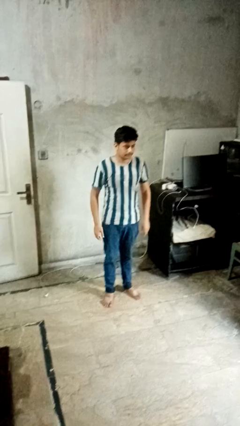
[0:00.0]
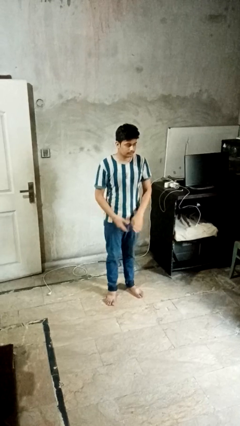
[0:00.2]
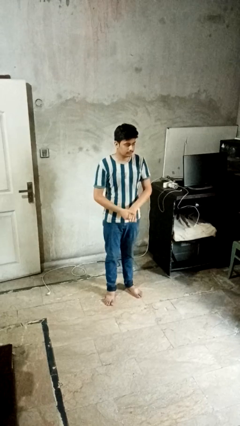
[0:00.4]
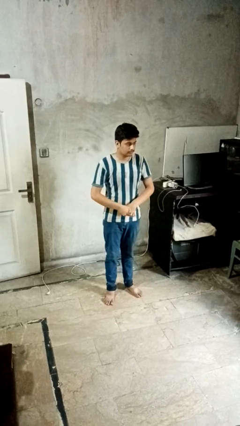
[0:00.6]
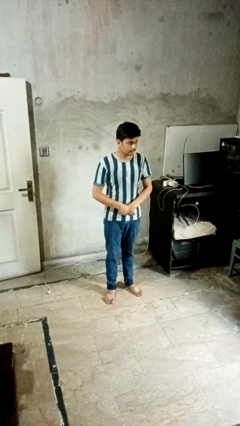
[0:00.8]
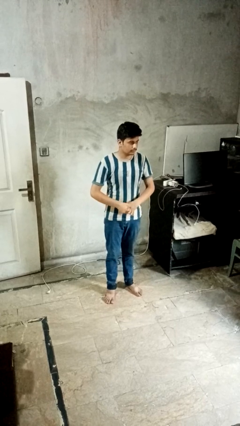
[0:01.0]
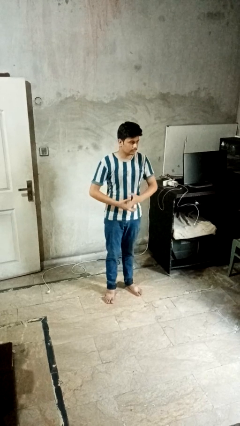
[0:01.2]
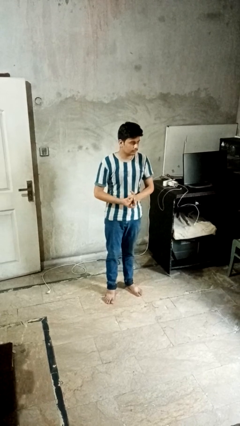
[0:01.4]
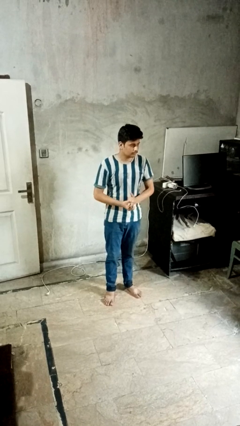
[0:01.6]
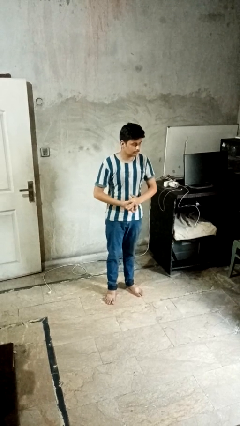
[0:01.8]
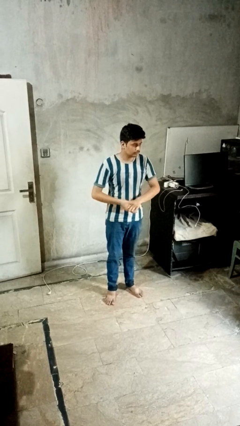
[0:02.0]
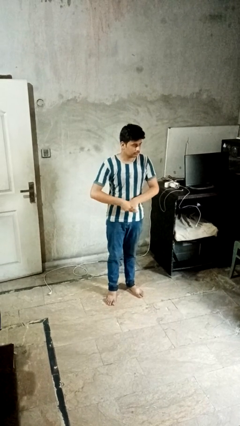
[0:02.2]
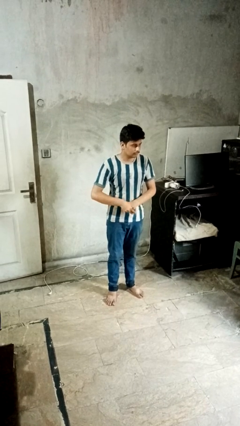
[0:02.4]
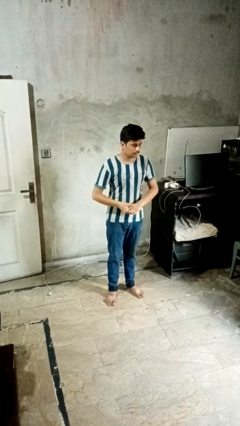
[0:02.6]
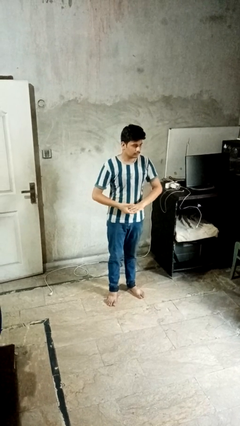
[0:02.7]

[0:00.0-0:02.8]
person cracks knuckles

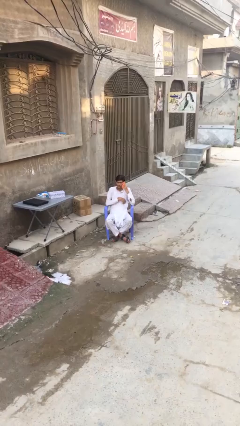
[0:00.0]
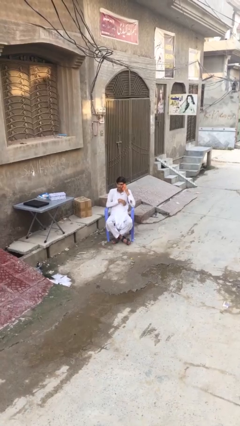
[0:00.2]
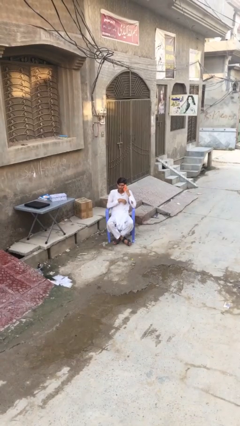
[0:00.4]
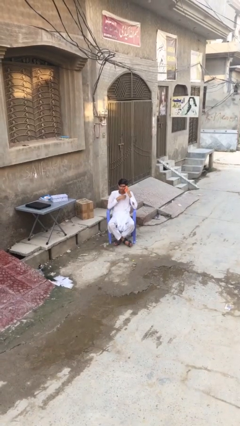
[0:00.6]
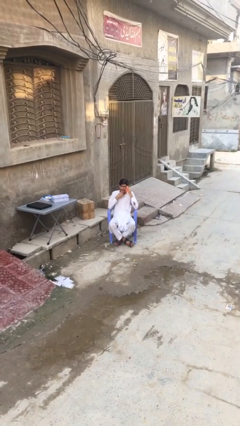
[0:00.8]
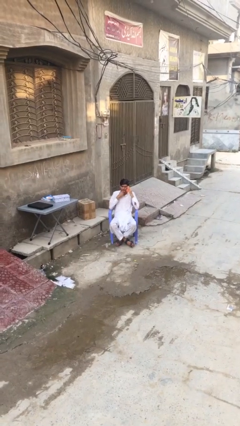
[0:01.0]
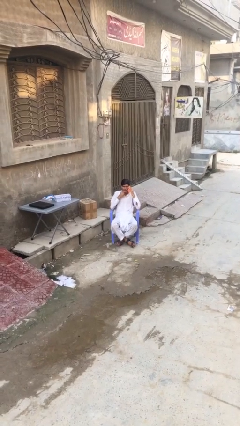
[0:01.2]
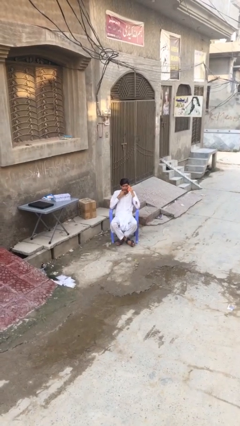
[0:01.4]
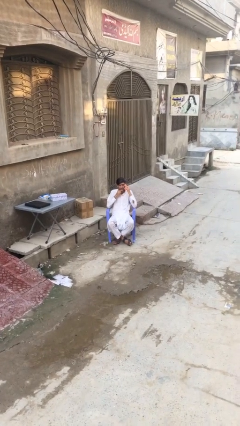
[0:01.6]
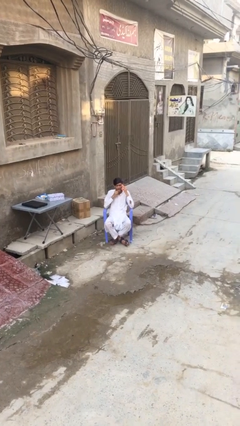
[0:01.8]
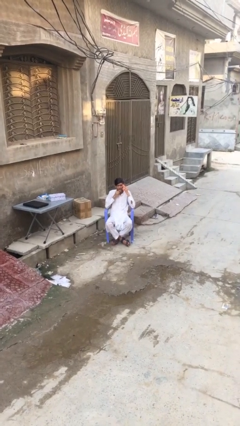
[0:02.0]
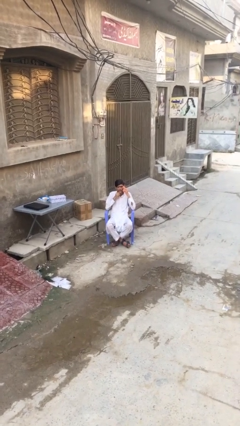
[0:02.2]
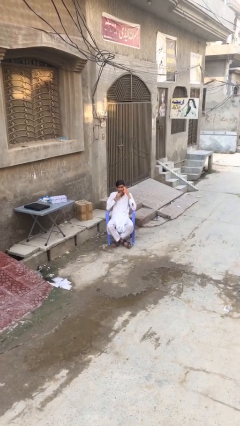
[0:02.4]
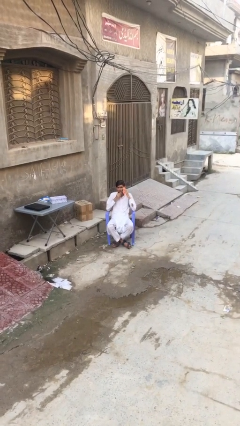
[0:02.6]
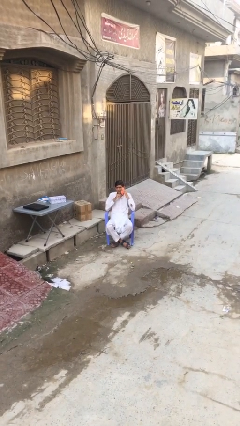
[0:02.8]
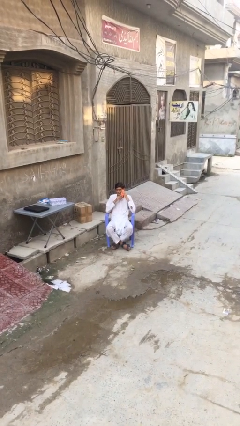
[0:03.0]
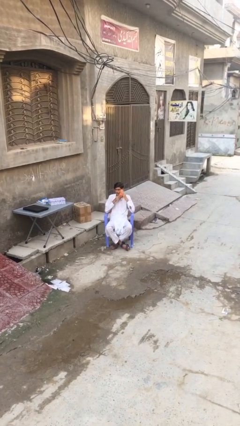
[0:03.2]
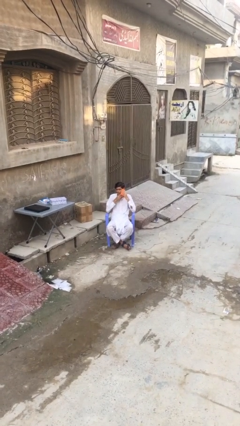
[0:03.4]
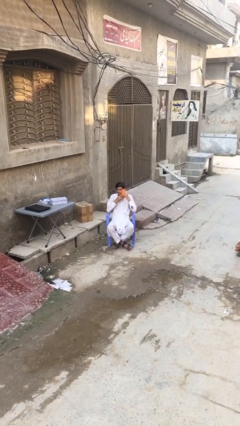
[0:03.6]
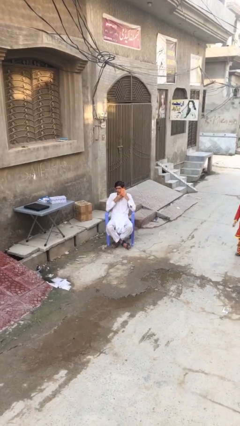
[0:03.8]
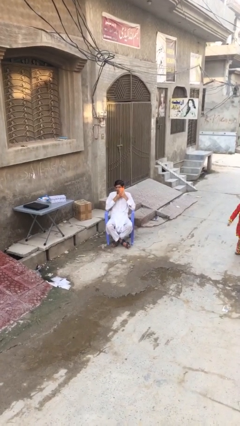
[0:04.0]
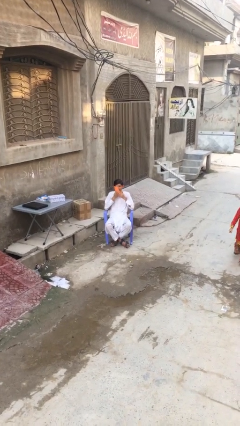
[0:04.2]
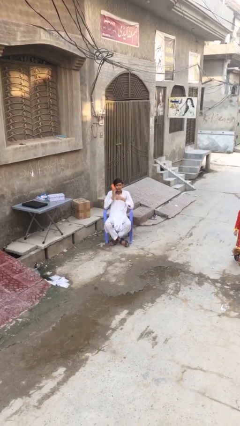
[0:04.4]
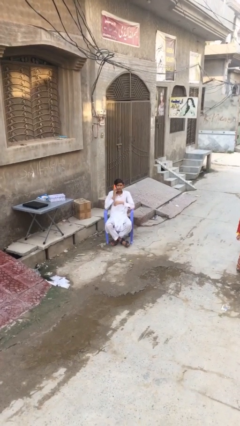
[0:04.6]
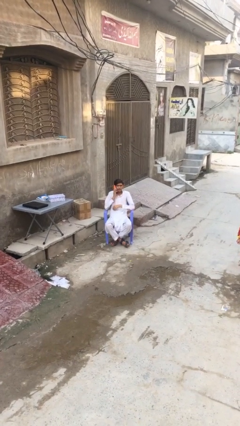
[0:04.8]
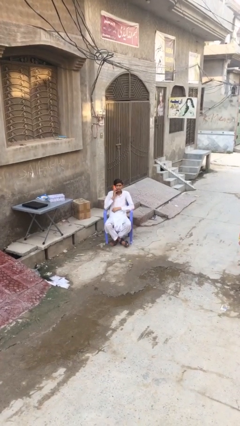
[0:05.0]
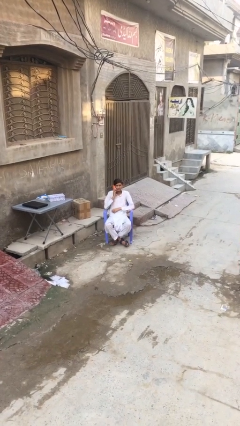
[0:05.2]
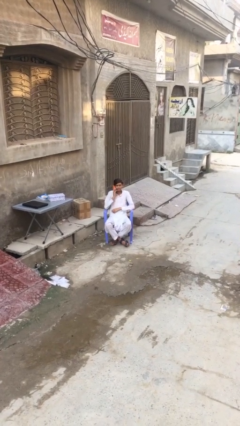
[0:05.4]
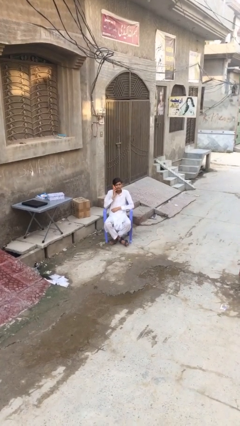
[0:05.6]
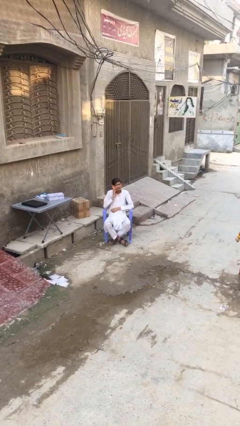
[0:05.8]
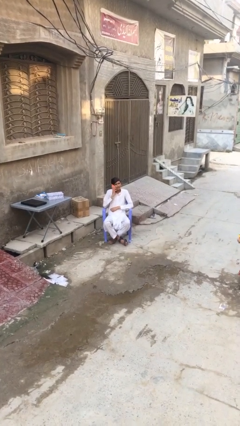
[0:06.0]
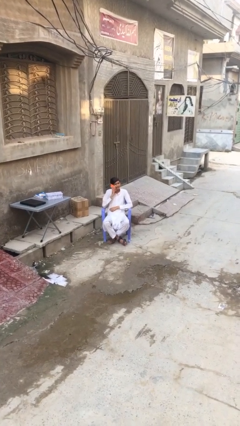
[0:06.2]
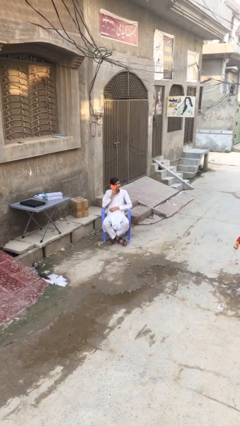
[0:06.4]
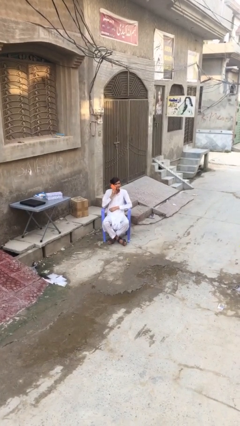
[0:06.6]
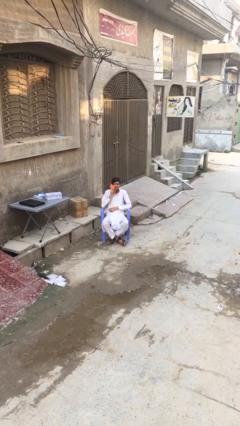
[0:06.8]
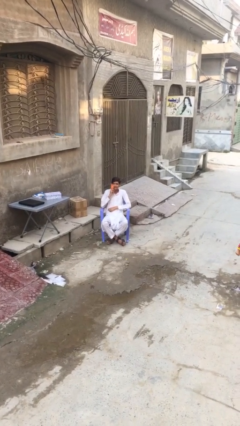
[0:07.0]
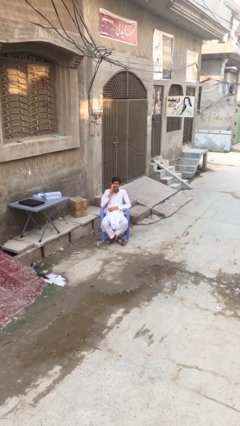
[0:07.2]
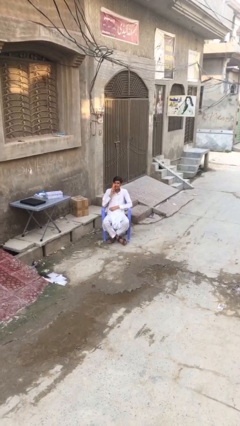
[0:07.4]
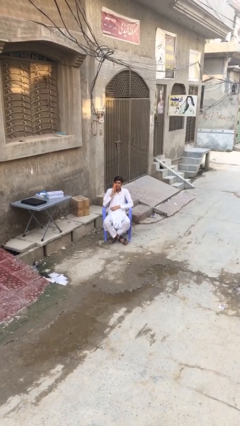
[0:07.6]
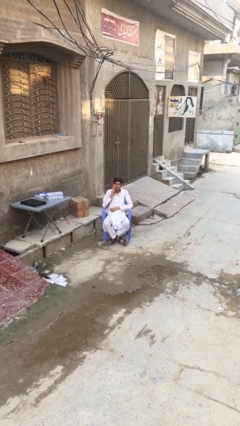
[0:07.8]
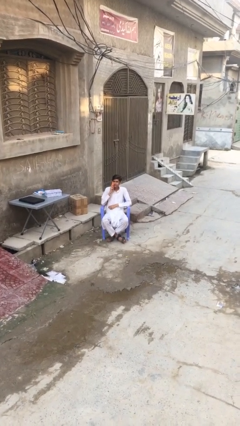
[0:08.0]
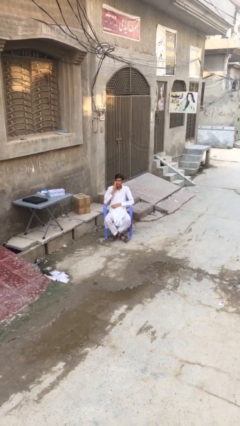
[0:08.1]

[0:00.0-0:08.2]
person talks on phone

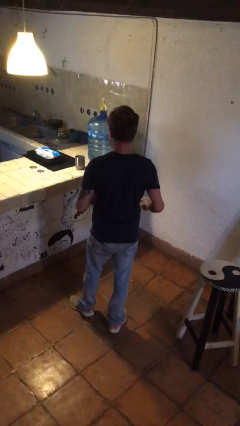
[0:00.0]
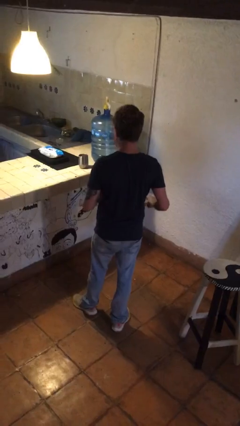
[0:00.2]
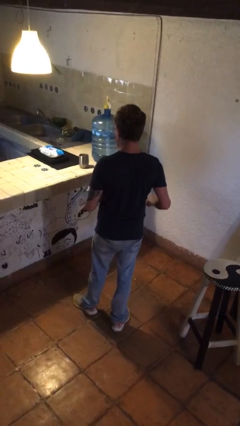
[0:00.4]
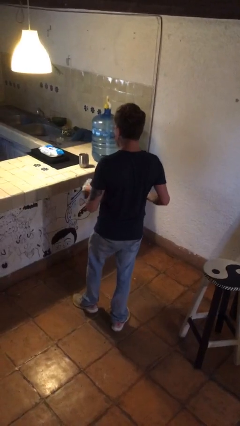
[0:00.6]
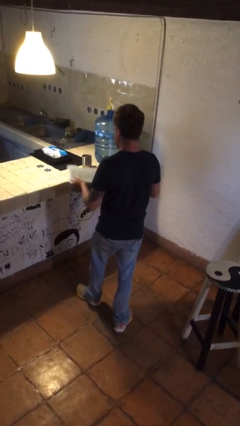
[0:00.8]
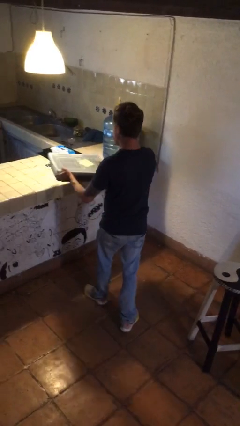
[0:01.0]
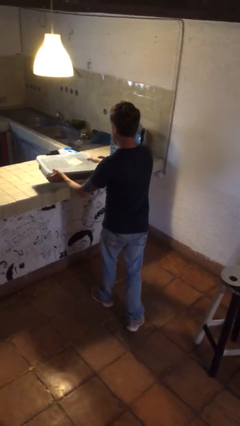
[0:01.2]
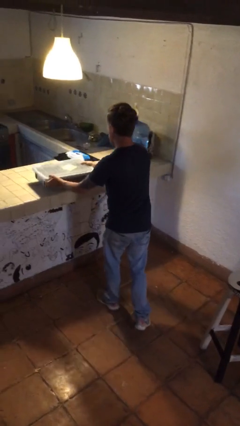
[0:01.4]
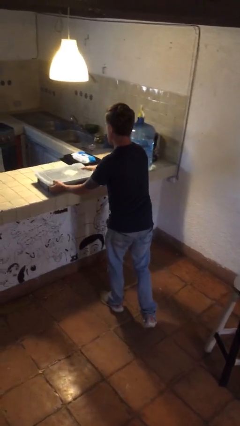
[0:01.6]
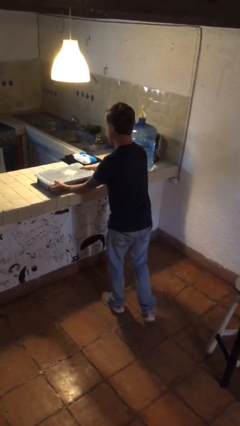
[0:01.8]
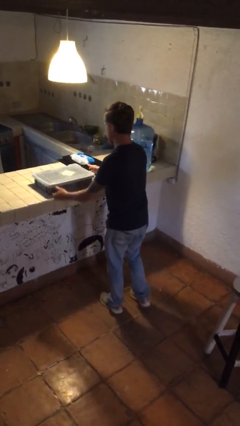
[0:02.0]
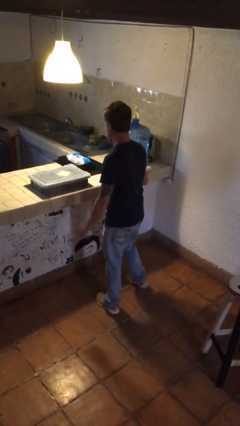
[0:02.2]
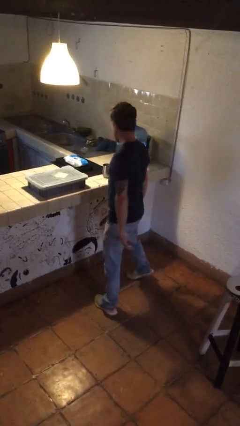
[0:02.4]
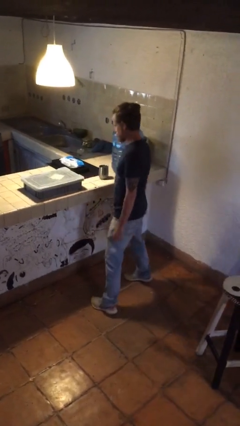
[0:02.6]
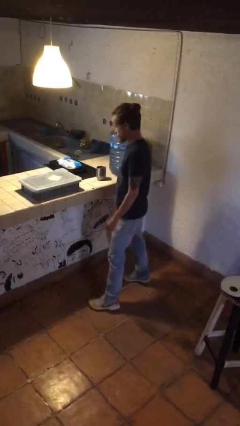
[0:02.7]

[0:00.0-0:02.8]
person puts down object on countertop

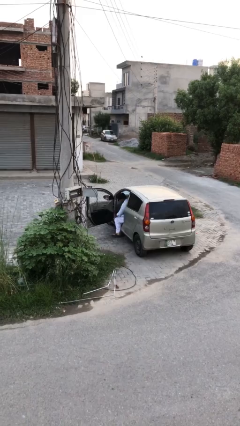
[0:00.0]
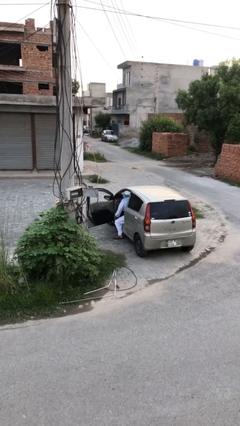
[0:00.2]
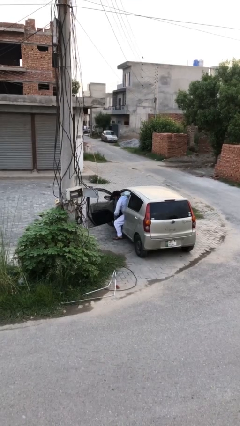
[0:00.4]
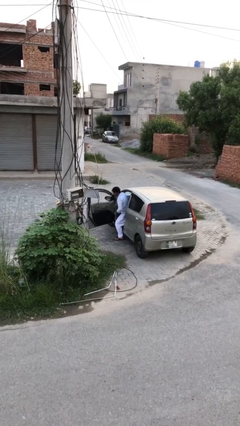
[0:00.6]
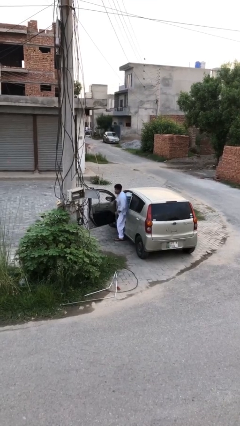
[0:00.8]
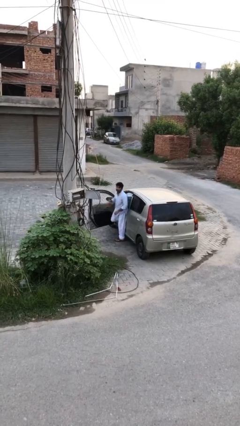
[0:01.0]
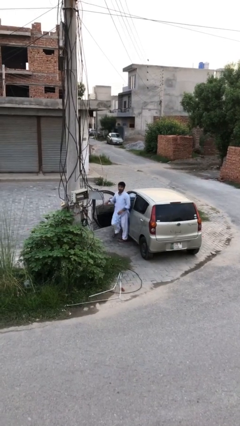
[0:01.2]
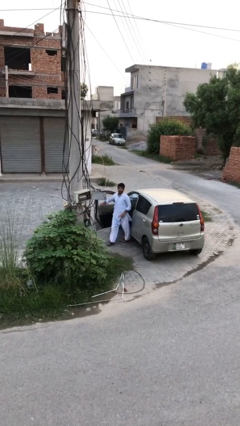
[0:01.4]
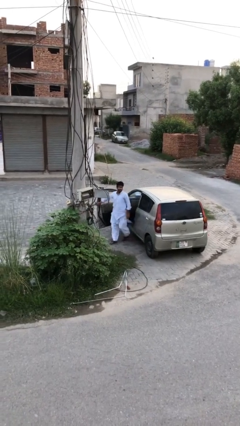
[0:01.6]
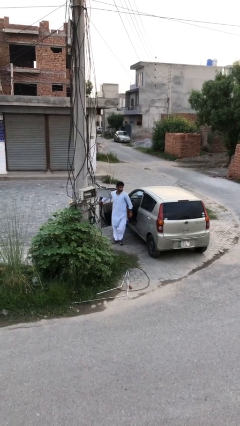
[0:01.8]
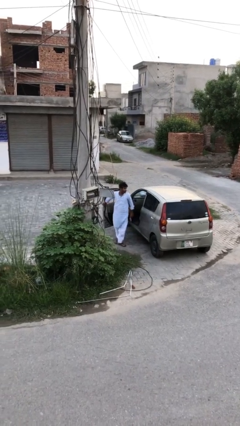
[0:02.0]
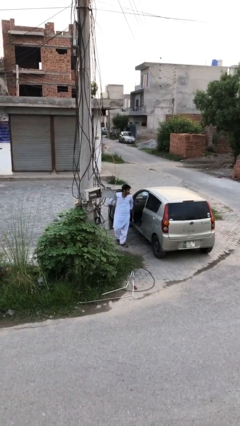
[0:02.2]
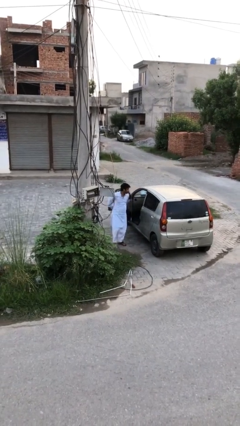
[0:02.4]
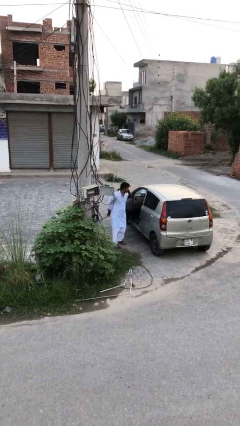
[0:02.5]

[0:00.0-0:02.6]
person exits car

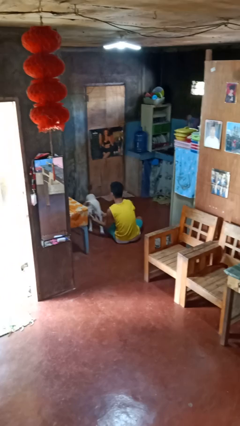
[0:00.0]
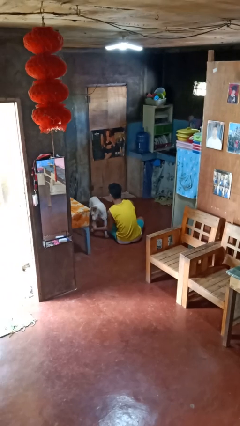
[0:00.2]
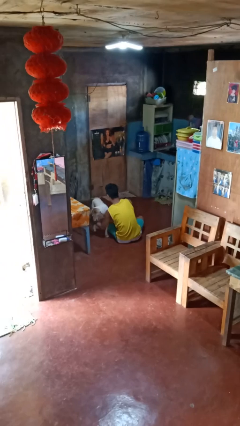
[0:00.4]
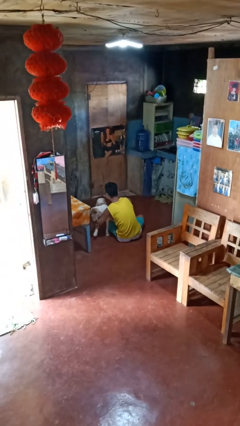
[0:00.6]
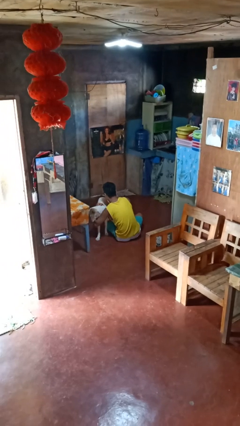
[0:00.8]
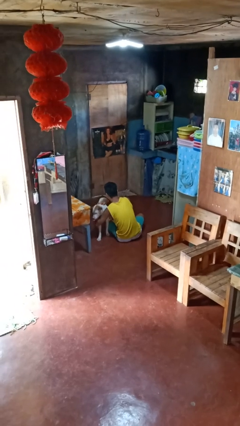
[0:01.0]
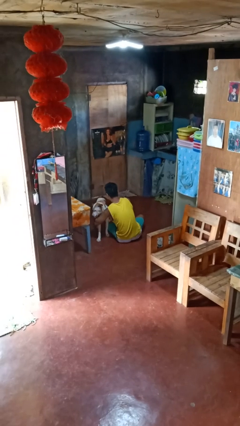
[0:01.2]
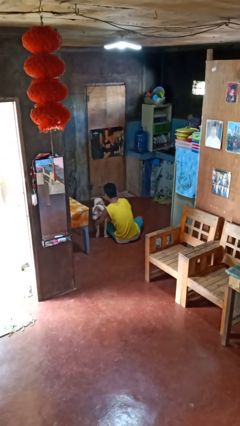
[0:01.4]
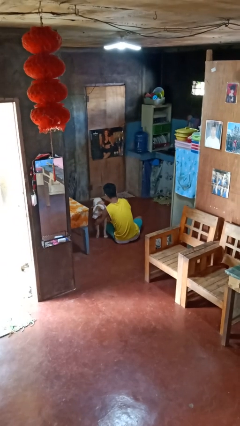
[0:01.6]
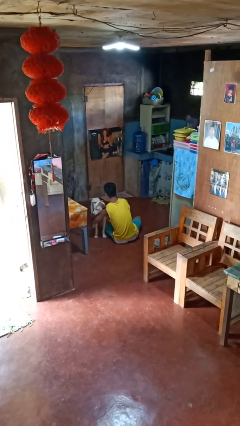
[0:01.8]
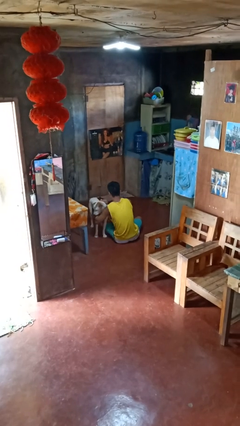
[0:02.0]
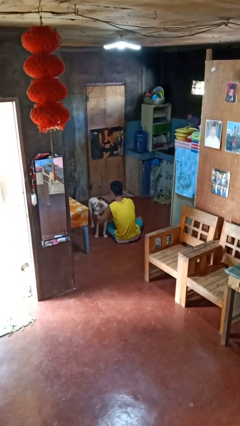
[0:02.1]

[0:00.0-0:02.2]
person hugs dog
